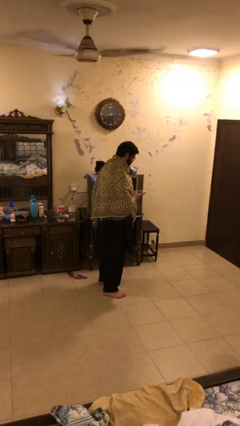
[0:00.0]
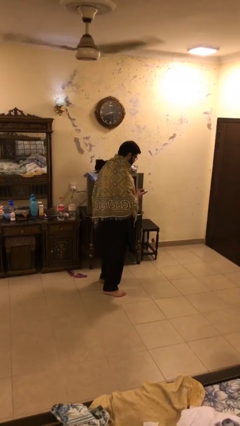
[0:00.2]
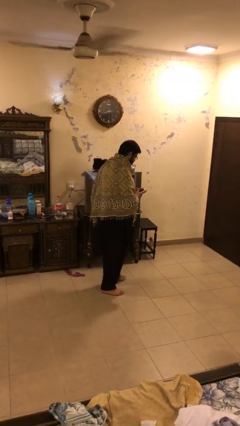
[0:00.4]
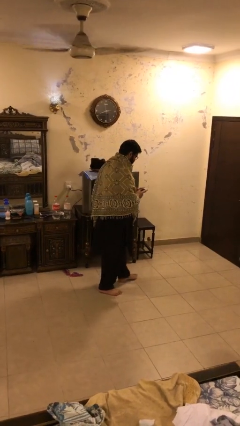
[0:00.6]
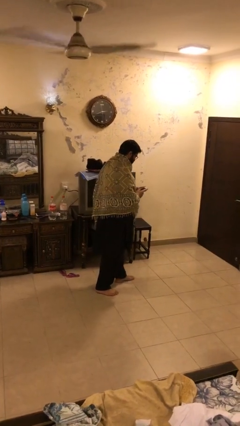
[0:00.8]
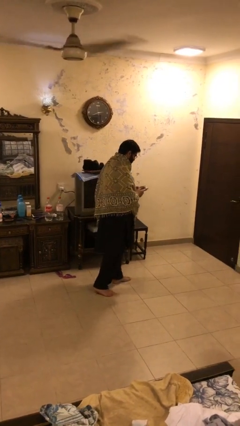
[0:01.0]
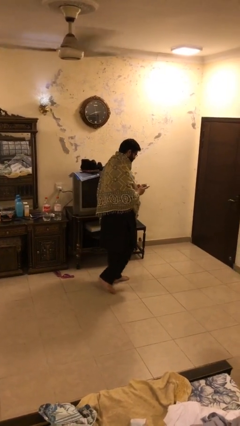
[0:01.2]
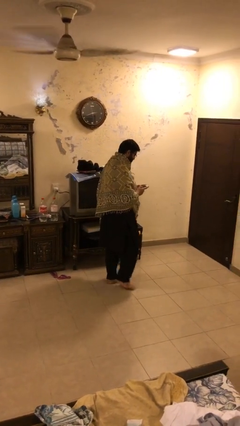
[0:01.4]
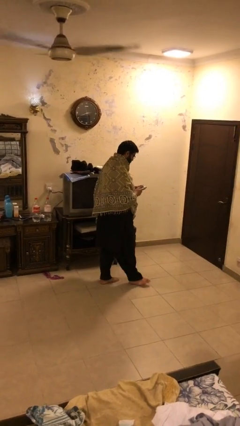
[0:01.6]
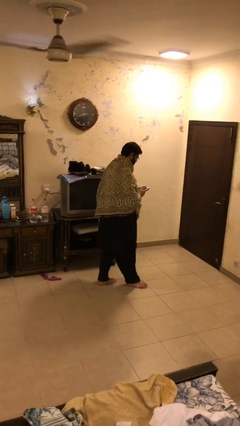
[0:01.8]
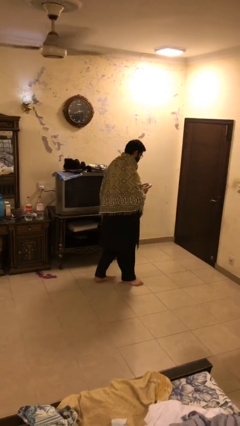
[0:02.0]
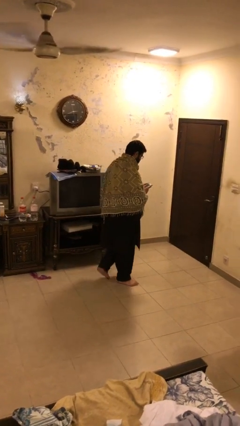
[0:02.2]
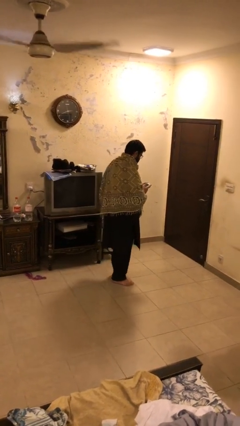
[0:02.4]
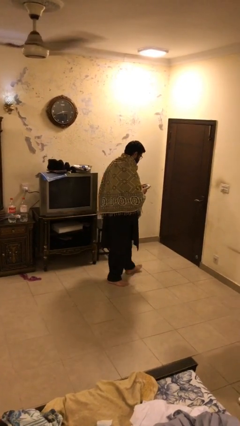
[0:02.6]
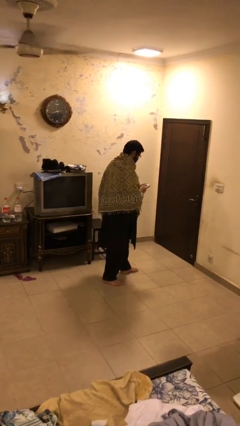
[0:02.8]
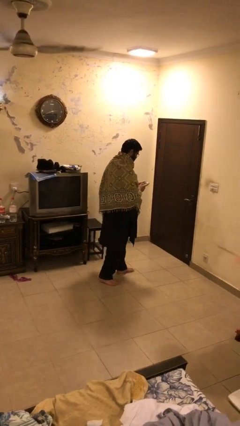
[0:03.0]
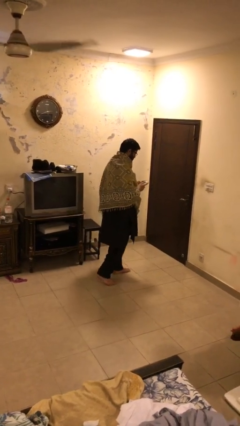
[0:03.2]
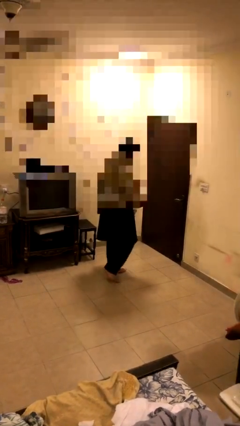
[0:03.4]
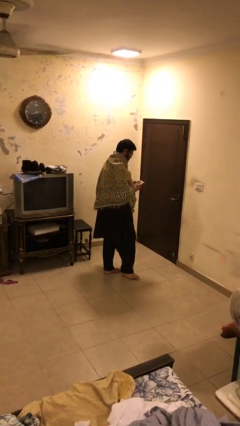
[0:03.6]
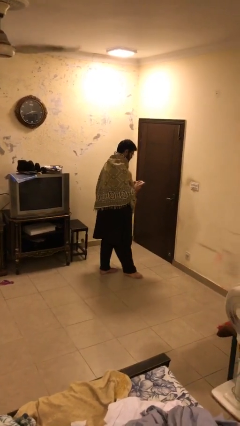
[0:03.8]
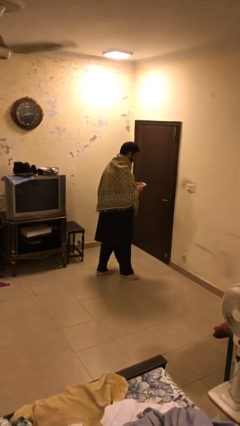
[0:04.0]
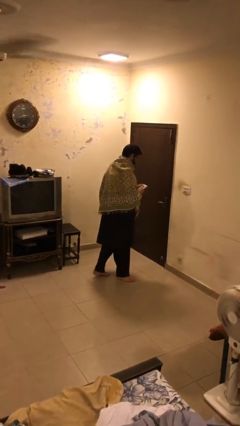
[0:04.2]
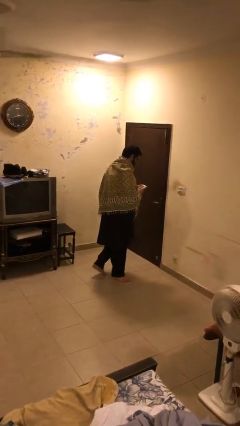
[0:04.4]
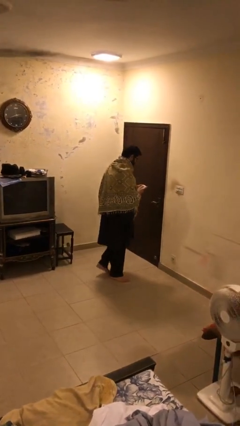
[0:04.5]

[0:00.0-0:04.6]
person texts on phone

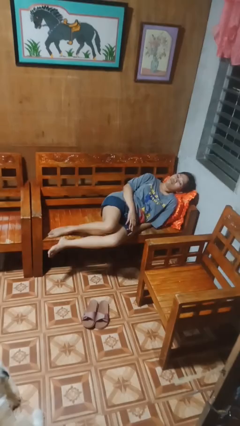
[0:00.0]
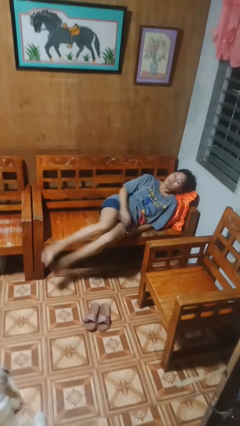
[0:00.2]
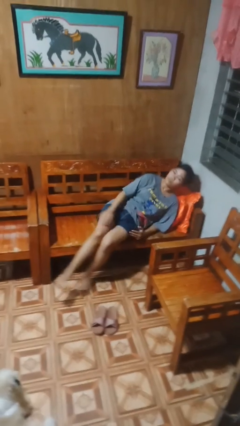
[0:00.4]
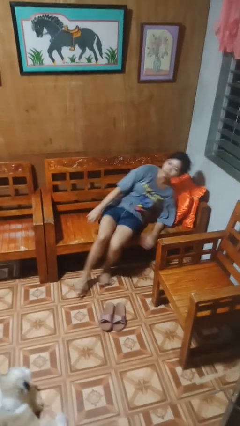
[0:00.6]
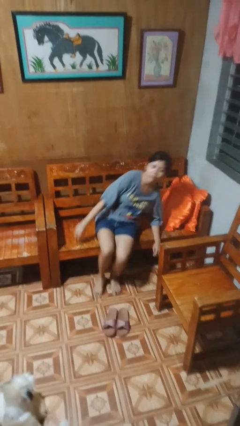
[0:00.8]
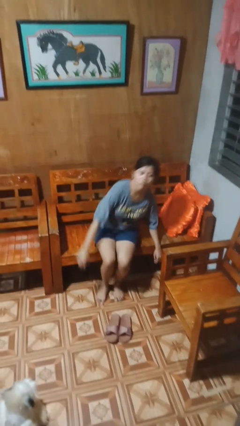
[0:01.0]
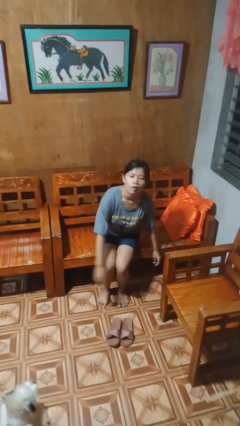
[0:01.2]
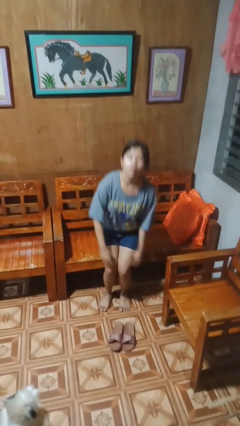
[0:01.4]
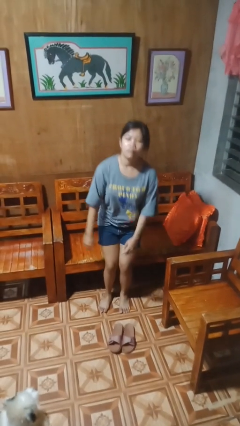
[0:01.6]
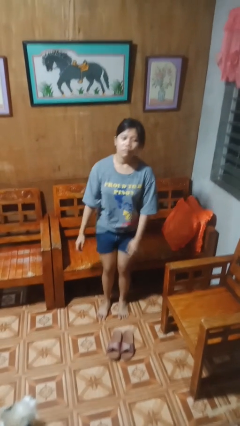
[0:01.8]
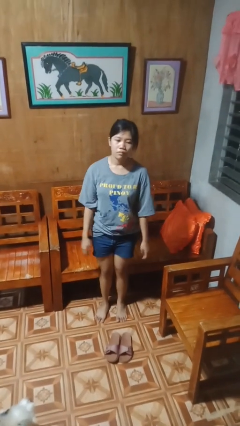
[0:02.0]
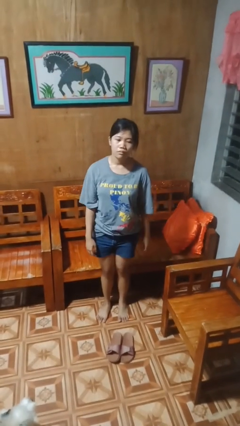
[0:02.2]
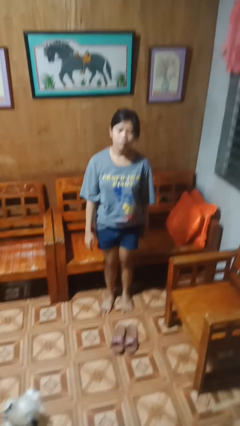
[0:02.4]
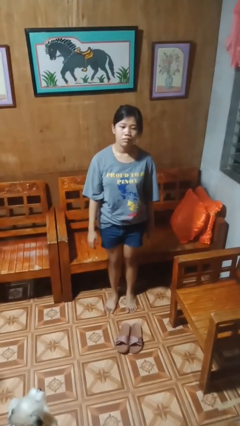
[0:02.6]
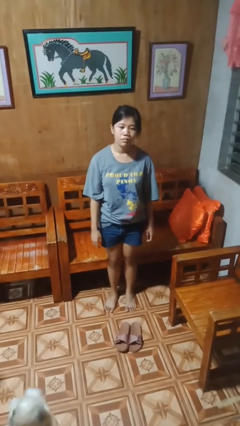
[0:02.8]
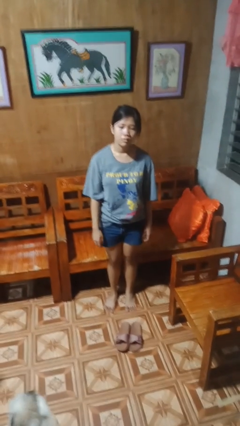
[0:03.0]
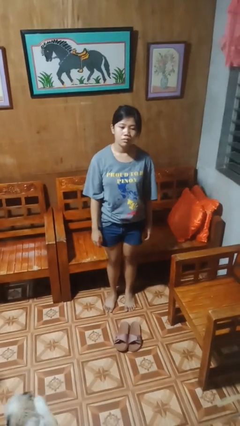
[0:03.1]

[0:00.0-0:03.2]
person stands up

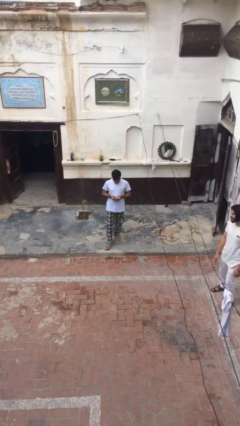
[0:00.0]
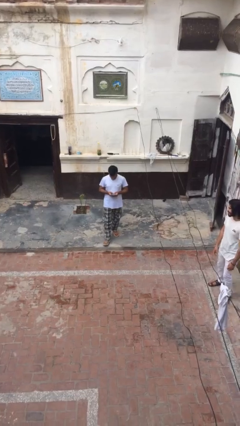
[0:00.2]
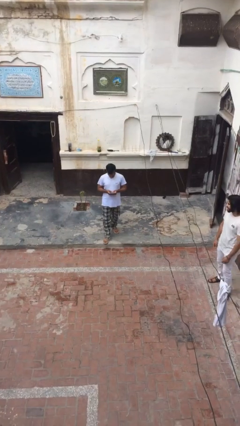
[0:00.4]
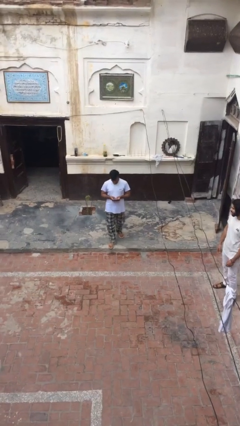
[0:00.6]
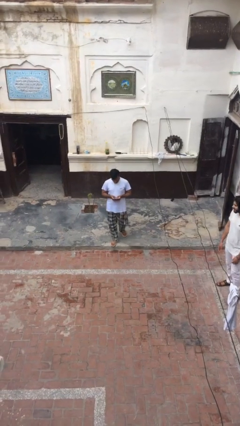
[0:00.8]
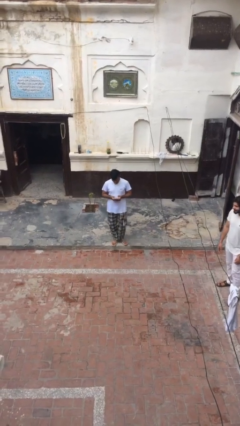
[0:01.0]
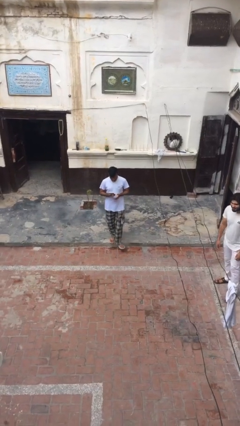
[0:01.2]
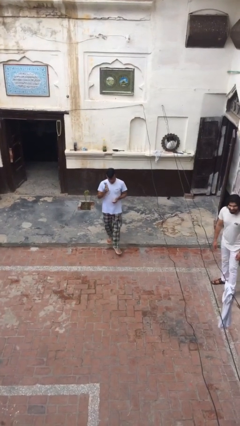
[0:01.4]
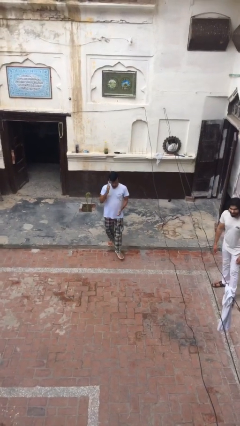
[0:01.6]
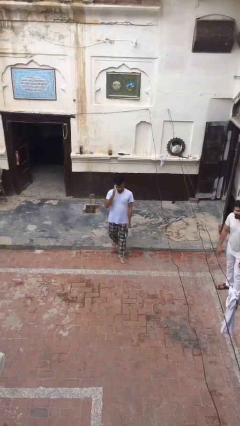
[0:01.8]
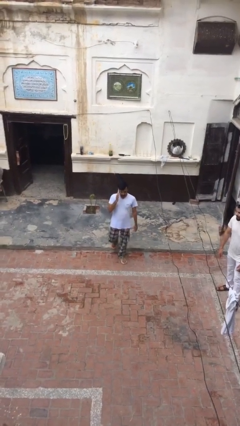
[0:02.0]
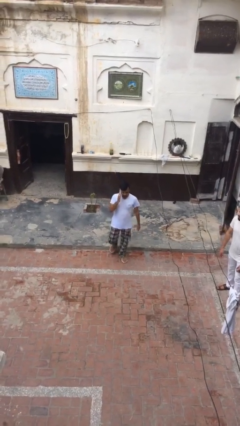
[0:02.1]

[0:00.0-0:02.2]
person talks on phone

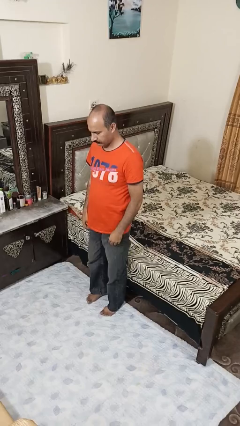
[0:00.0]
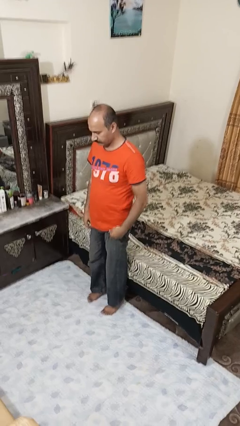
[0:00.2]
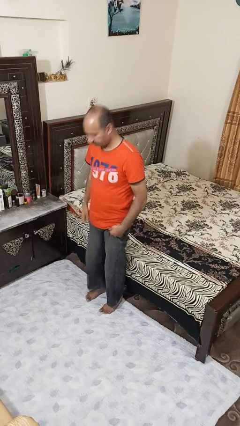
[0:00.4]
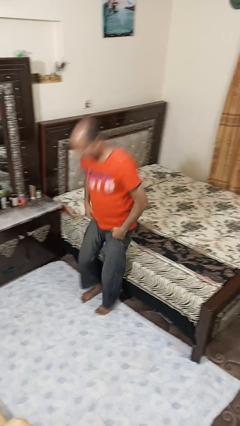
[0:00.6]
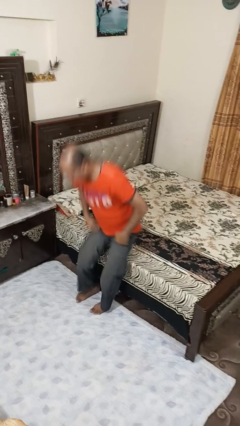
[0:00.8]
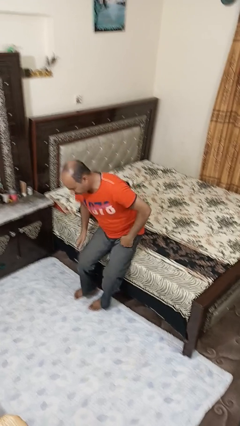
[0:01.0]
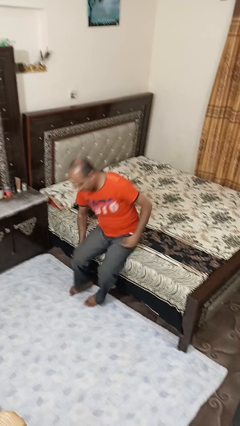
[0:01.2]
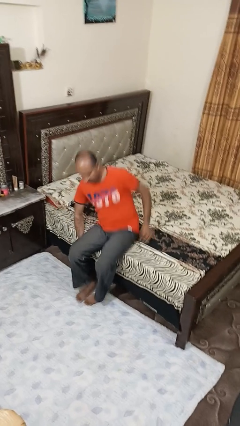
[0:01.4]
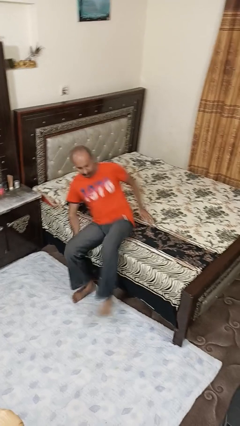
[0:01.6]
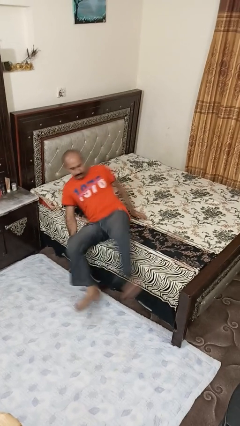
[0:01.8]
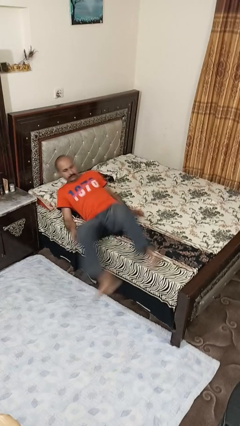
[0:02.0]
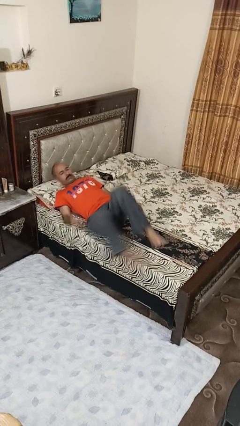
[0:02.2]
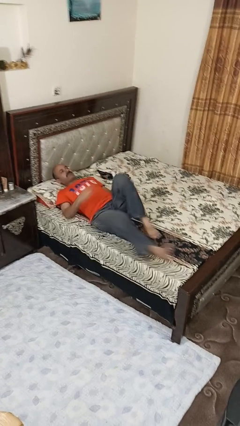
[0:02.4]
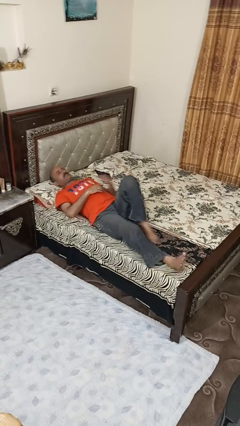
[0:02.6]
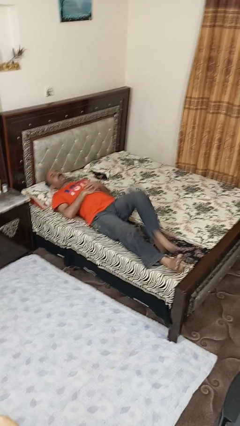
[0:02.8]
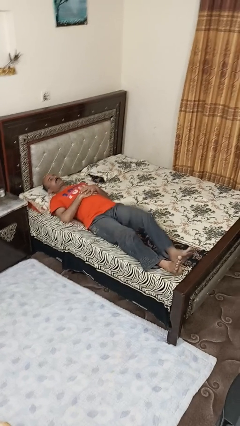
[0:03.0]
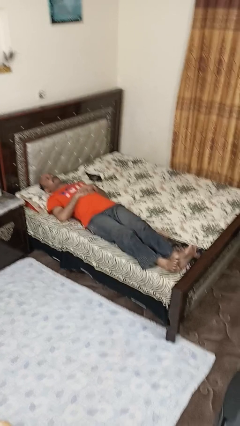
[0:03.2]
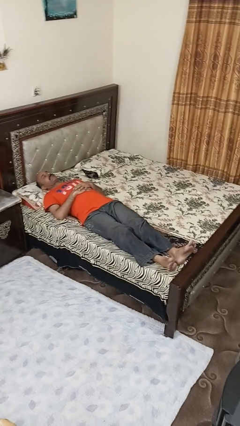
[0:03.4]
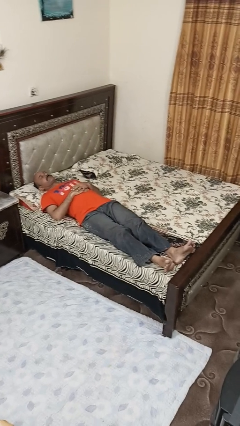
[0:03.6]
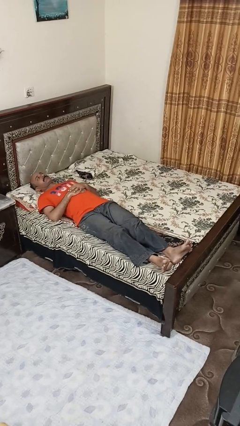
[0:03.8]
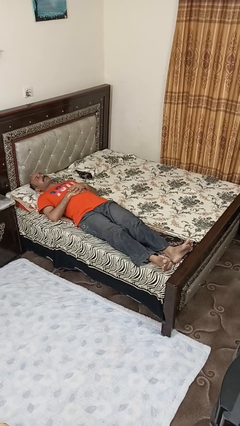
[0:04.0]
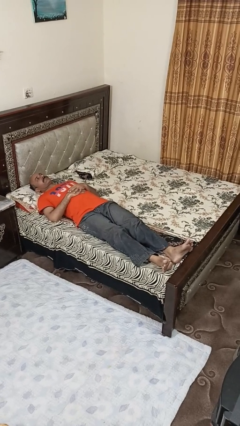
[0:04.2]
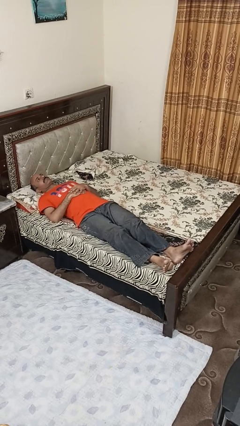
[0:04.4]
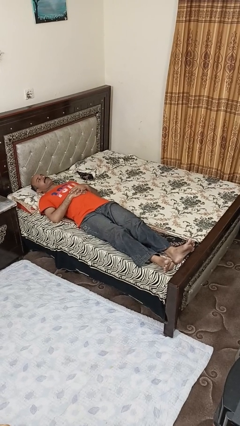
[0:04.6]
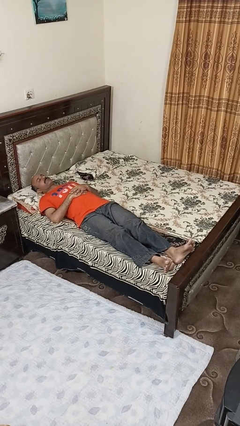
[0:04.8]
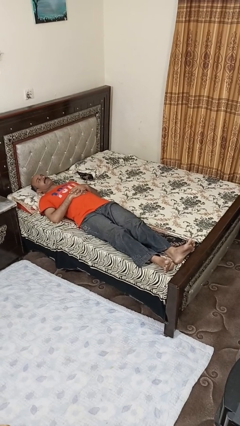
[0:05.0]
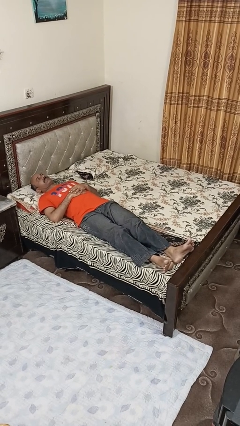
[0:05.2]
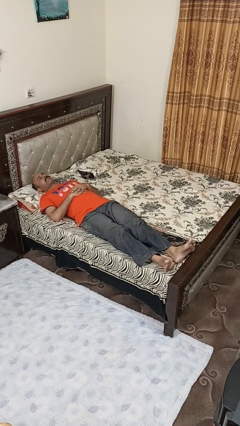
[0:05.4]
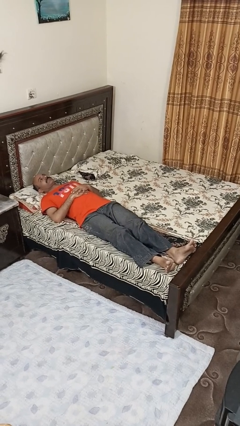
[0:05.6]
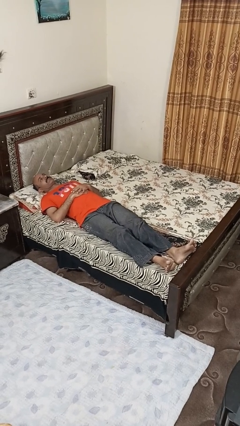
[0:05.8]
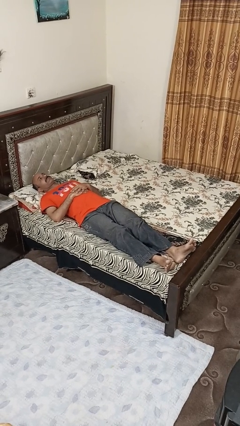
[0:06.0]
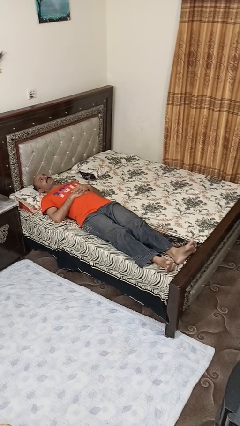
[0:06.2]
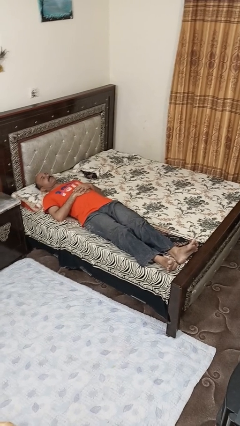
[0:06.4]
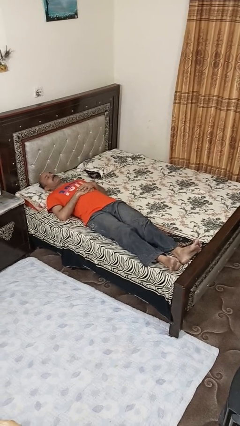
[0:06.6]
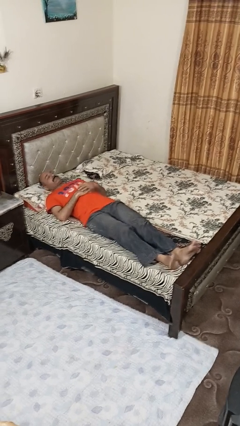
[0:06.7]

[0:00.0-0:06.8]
person lies down on bed

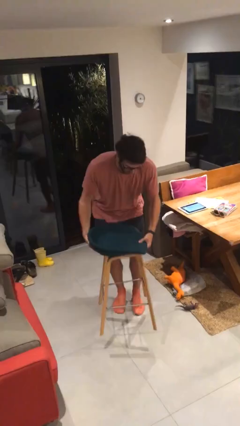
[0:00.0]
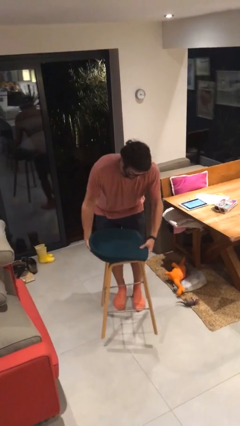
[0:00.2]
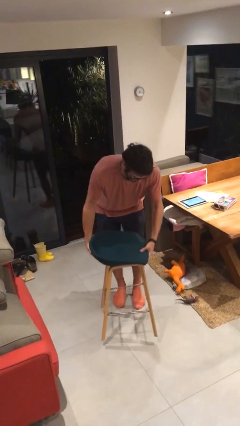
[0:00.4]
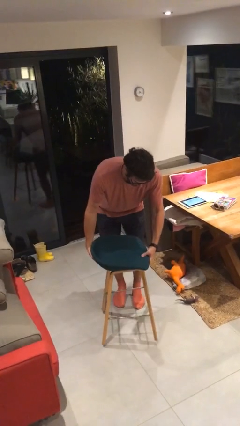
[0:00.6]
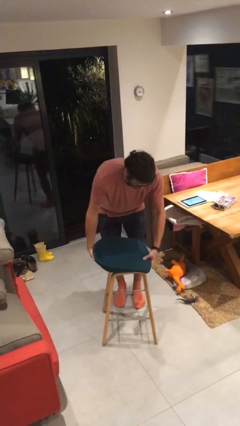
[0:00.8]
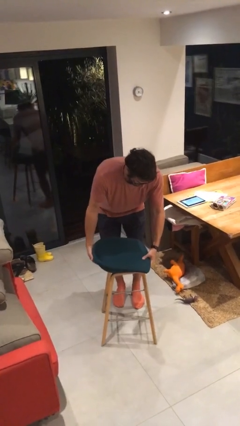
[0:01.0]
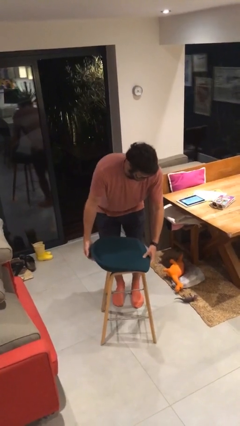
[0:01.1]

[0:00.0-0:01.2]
person puts down object on floor
